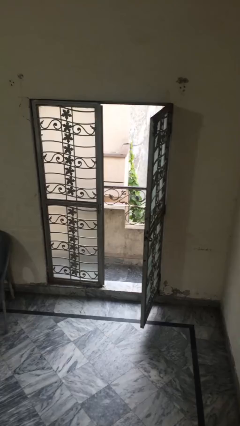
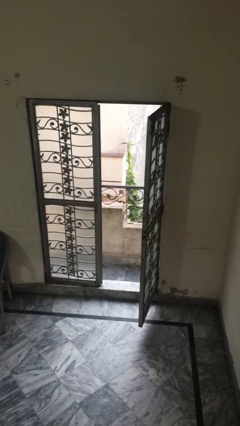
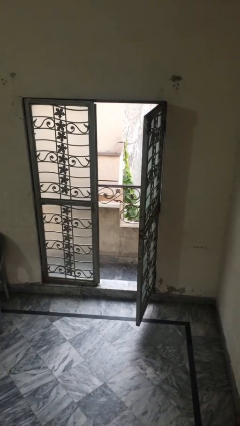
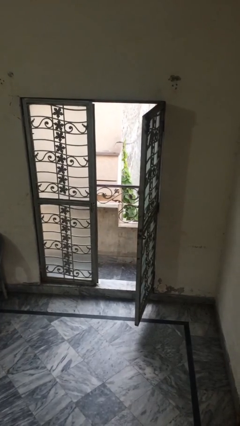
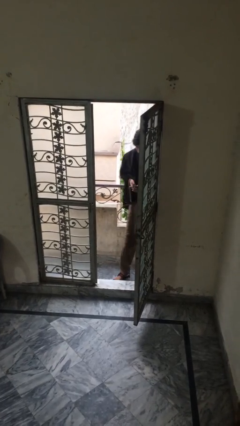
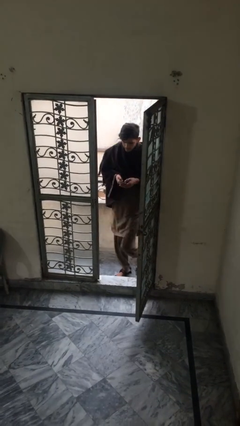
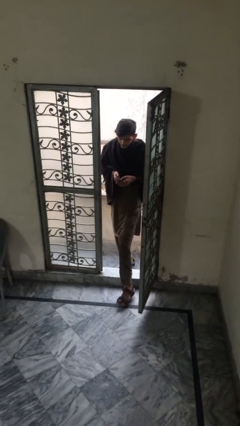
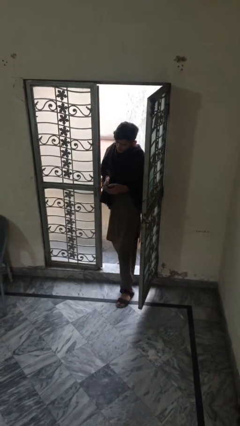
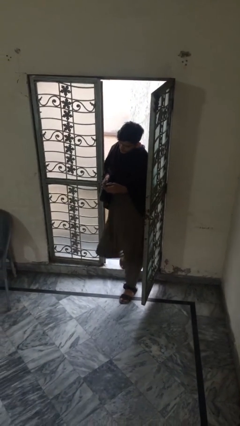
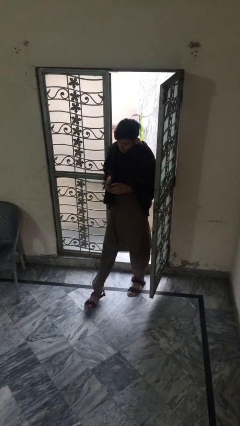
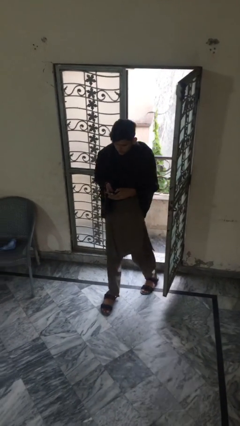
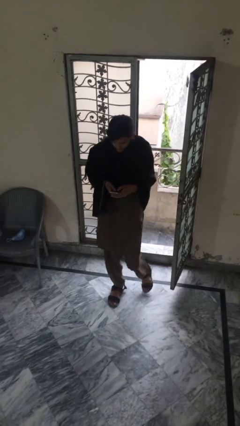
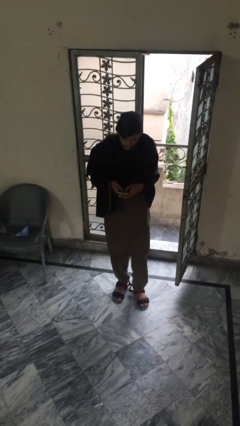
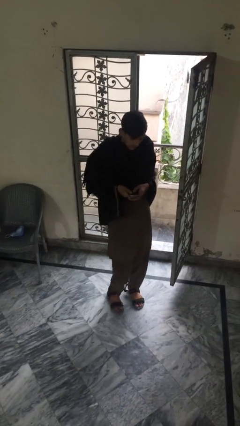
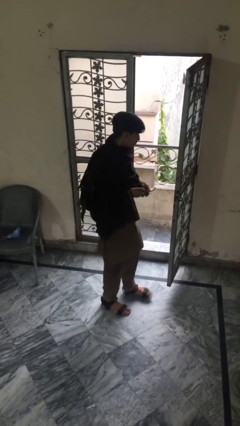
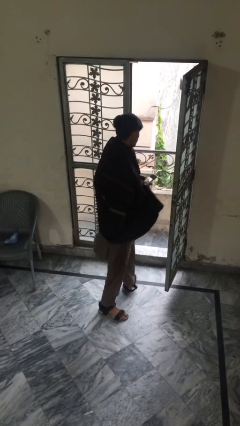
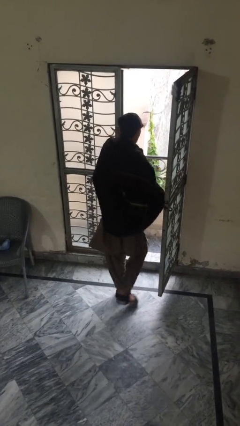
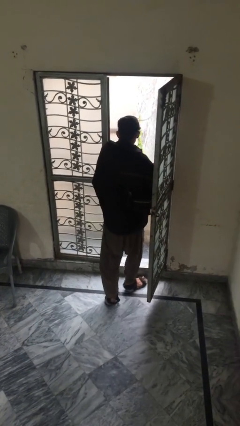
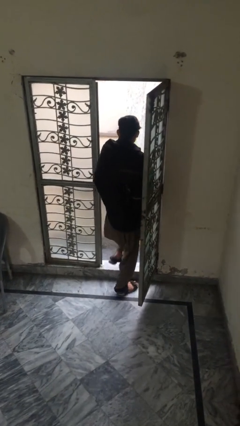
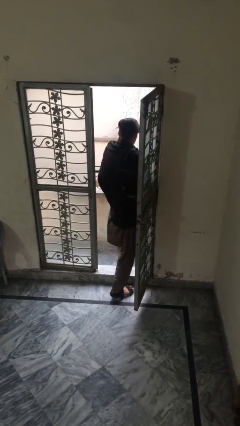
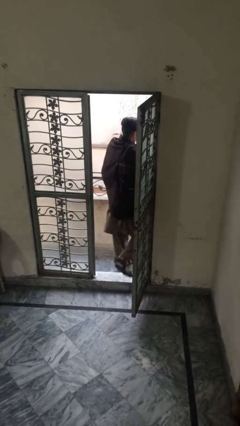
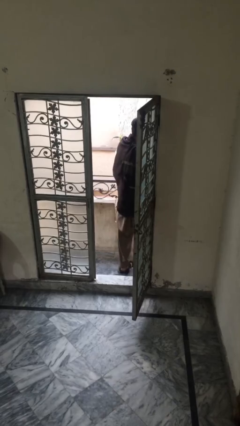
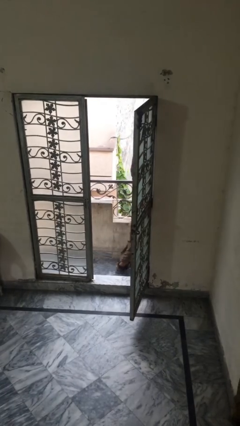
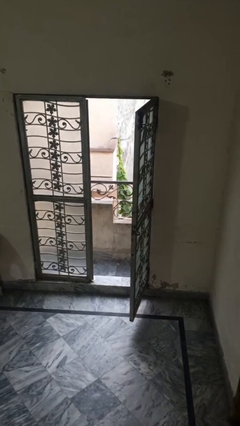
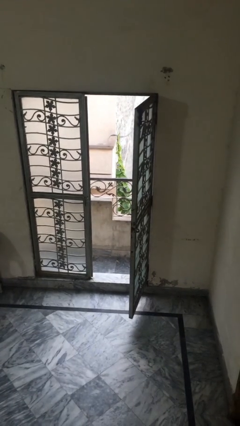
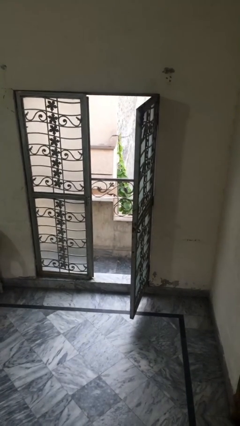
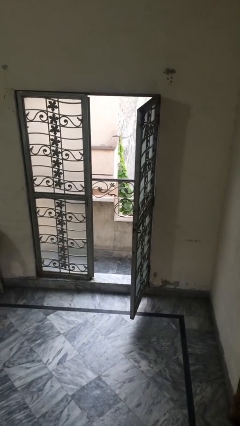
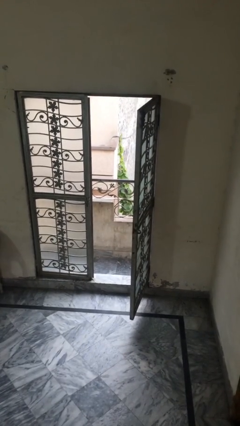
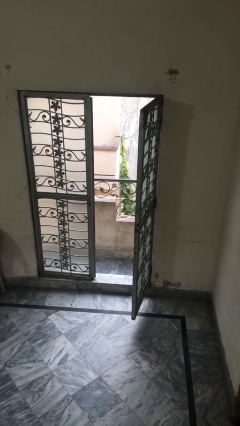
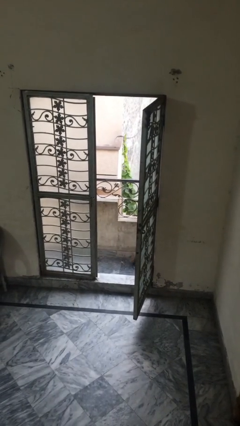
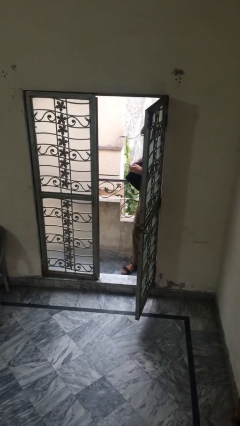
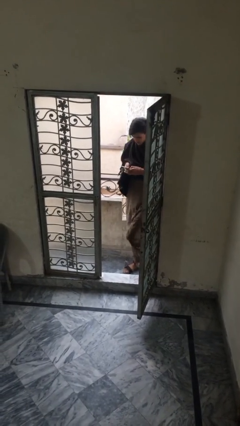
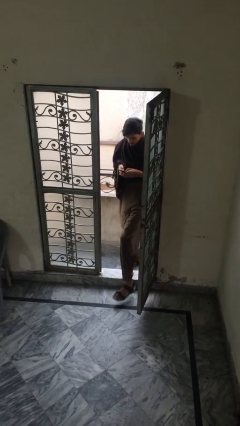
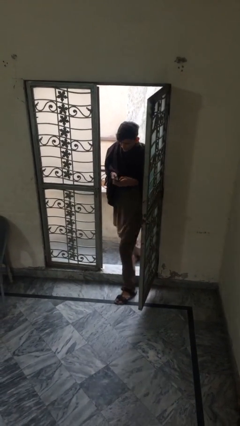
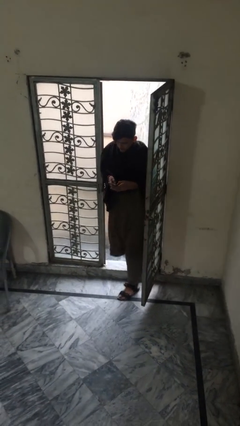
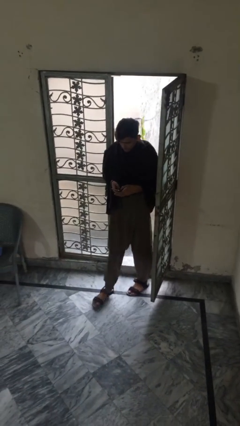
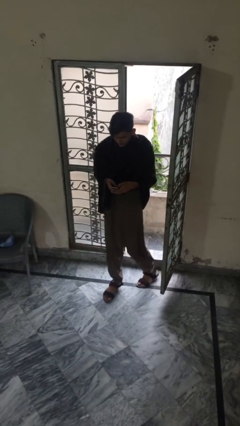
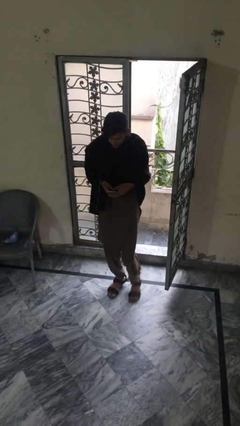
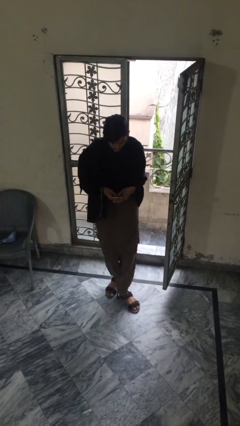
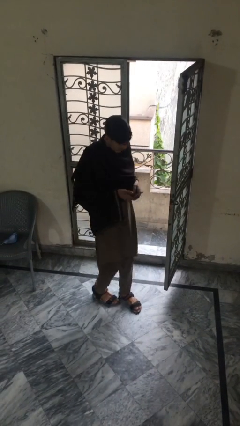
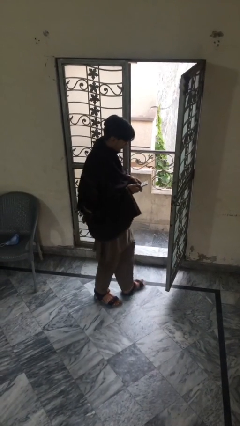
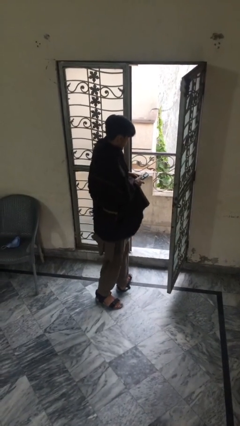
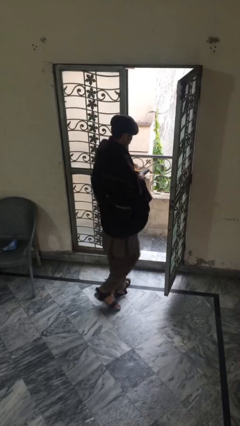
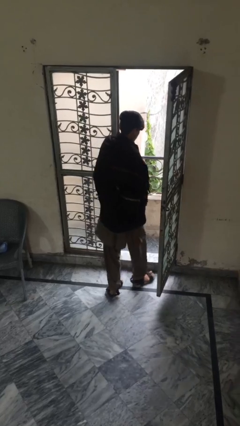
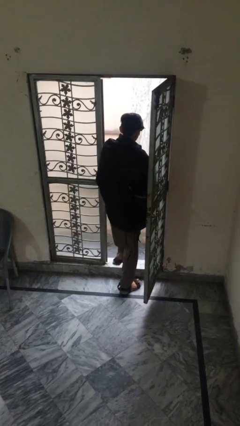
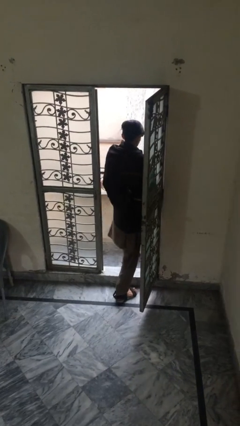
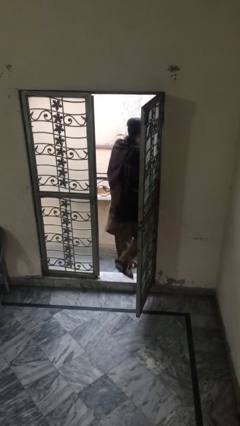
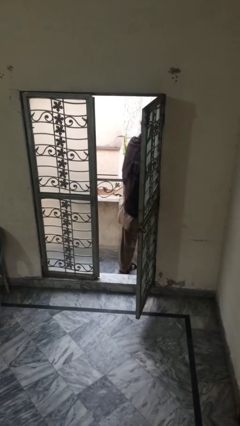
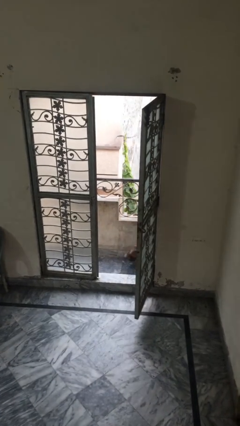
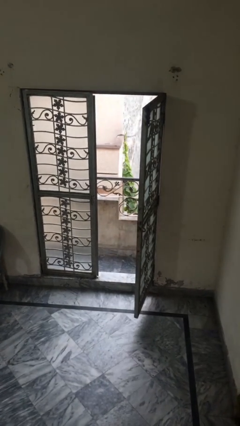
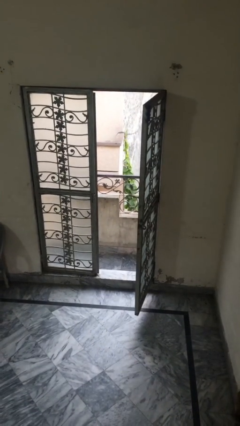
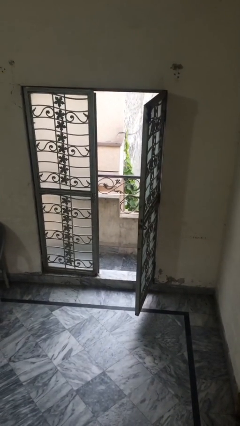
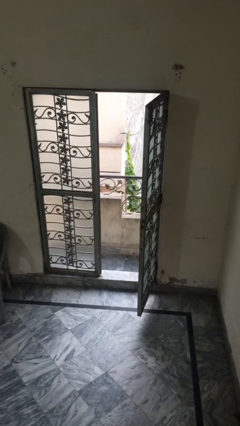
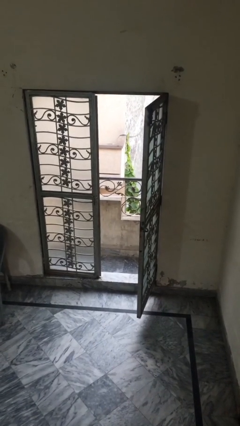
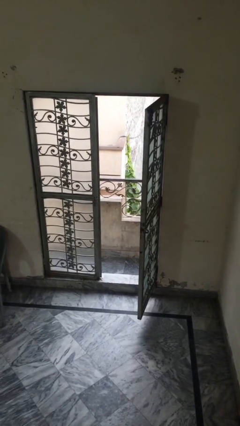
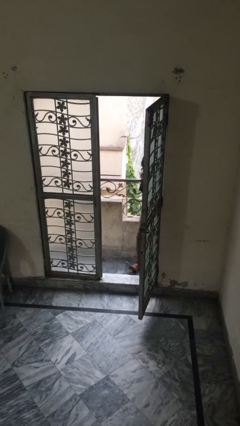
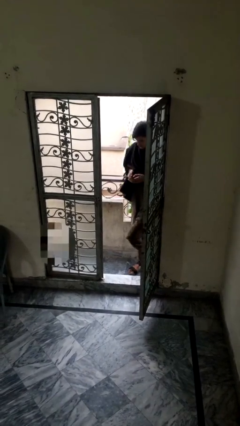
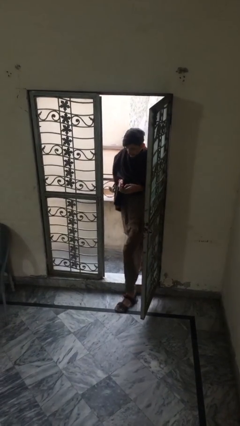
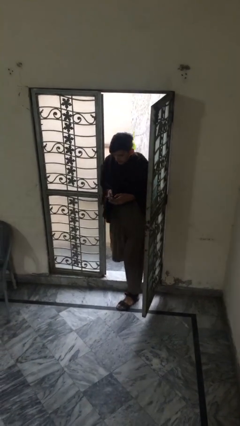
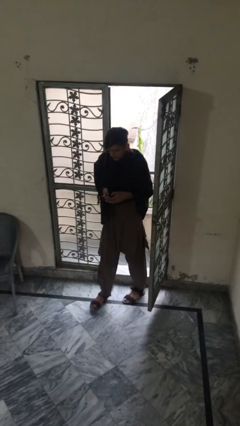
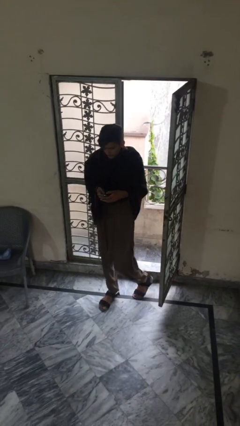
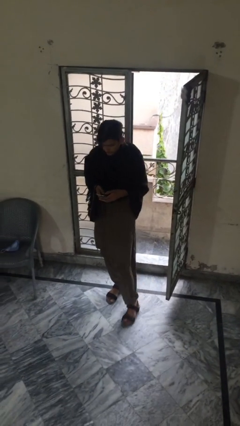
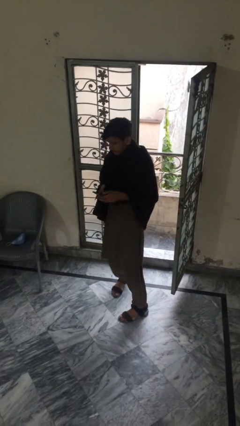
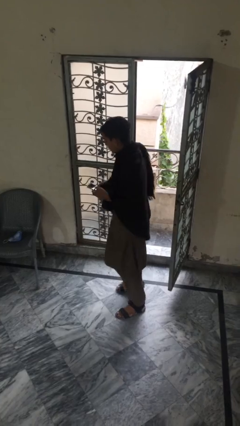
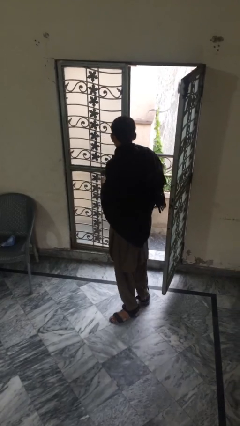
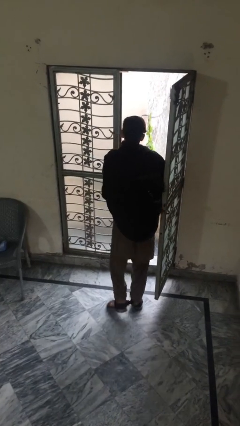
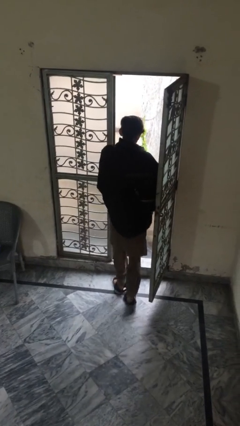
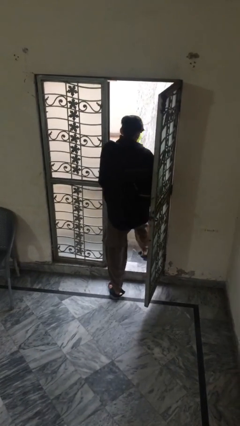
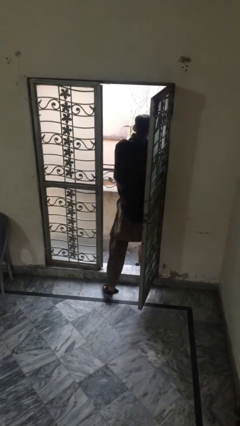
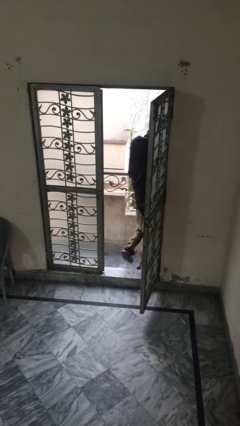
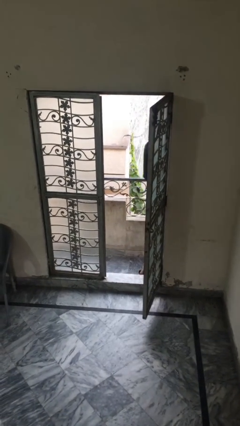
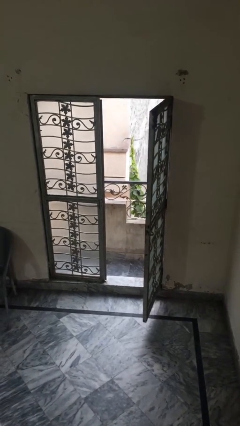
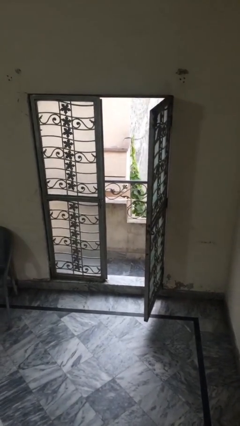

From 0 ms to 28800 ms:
person texts on phone

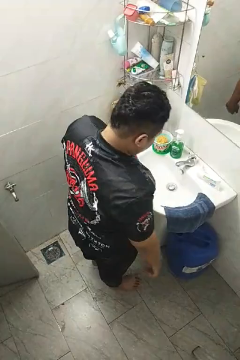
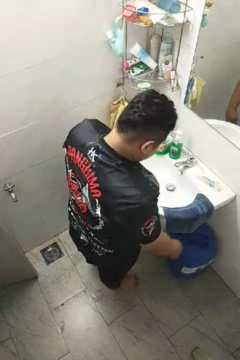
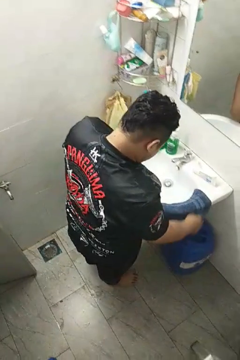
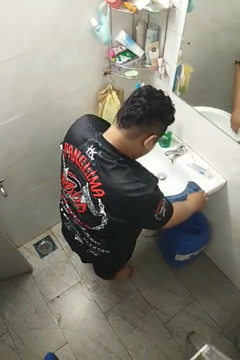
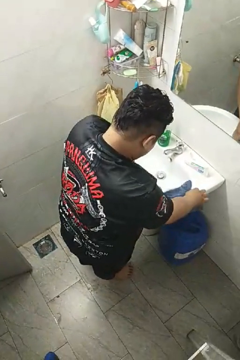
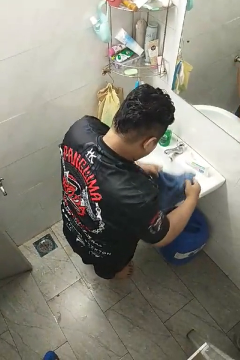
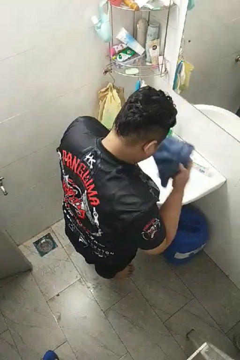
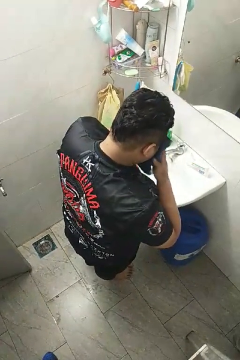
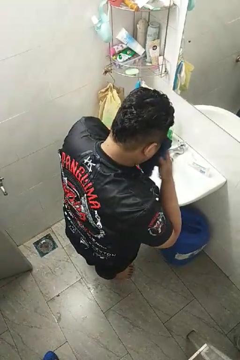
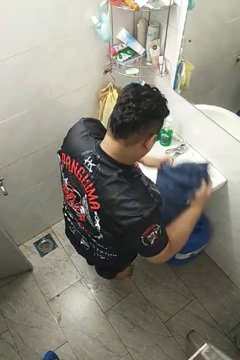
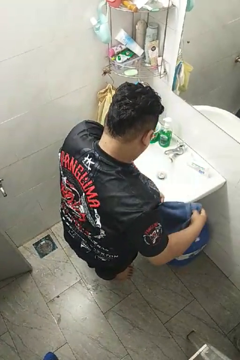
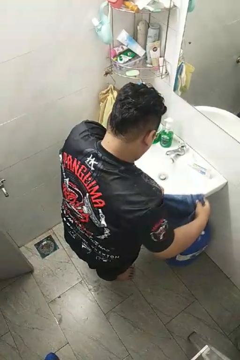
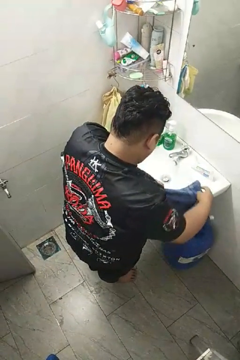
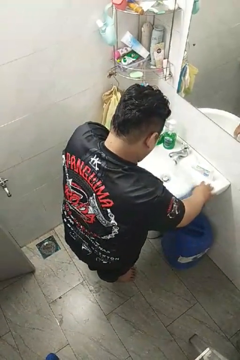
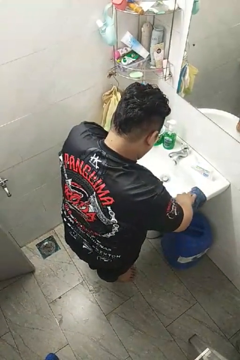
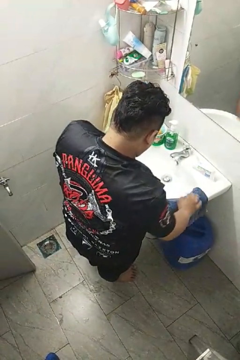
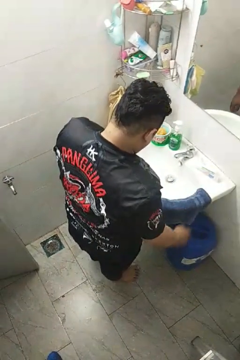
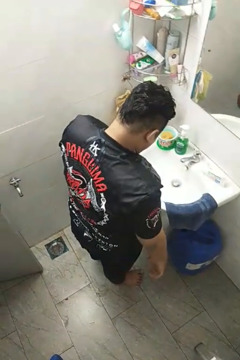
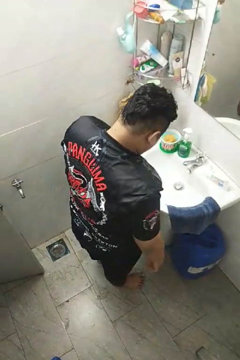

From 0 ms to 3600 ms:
person dries face with towel

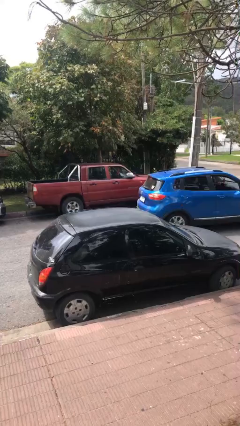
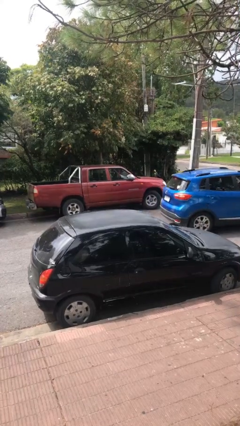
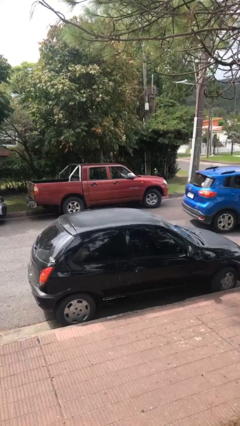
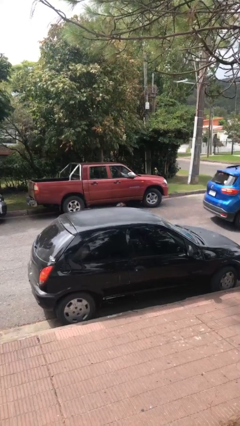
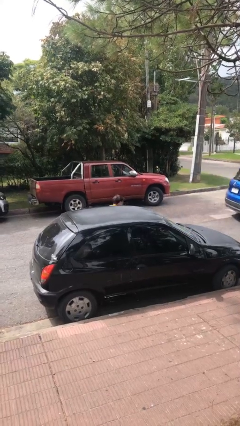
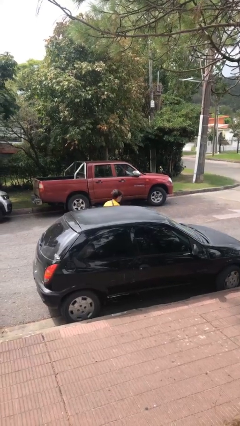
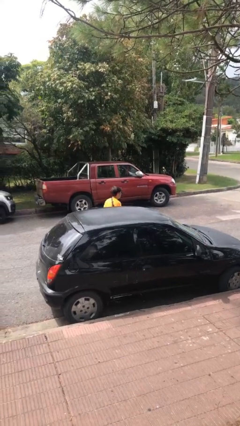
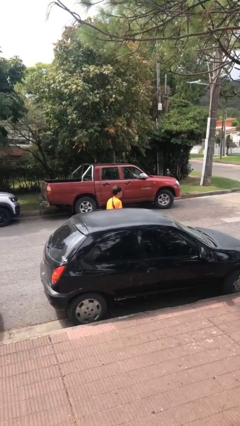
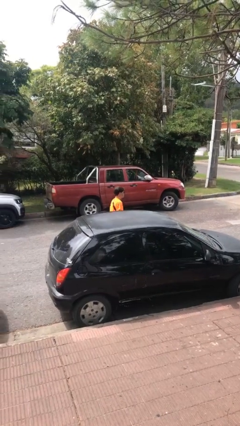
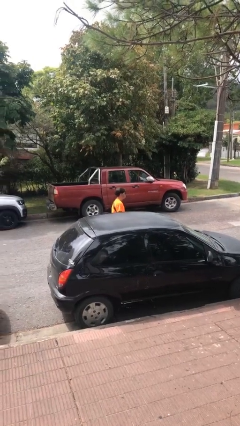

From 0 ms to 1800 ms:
person exits car
